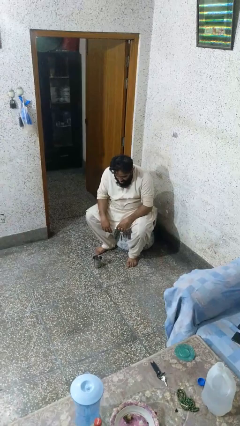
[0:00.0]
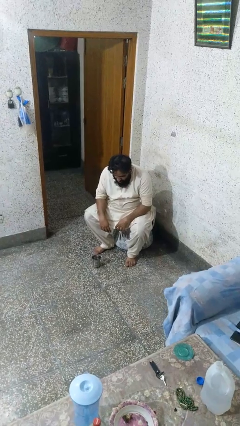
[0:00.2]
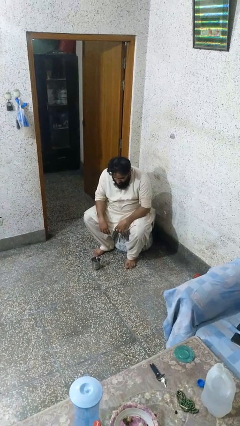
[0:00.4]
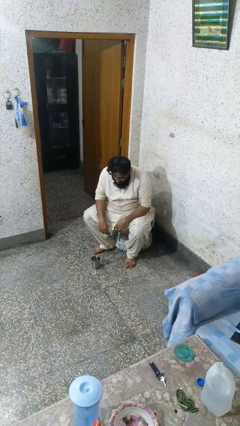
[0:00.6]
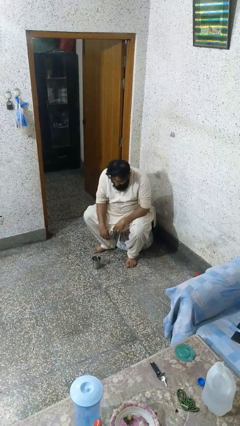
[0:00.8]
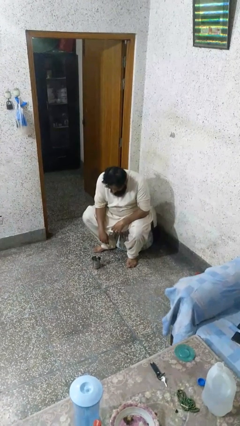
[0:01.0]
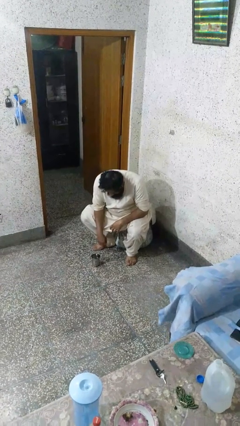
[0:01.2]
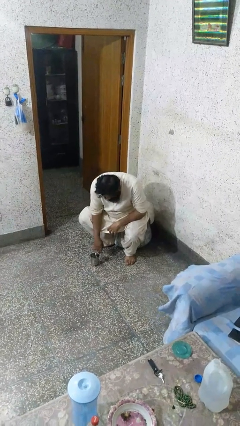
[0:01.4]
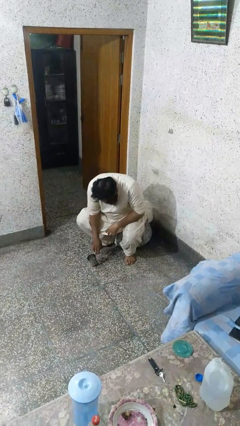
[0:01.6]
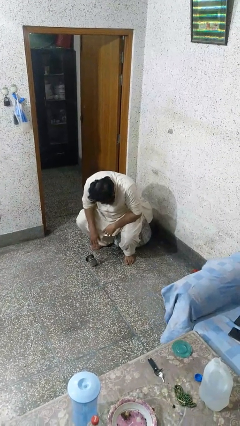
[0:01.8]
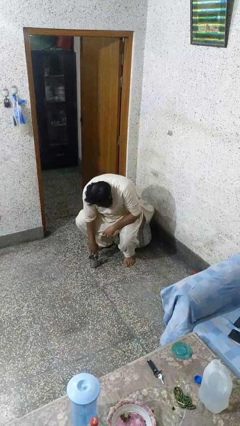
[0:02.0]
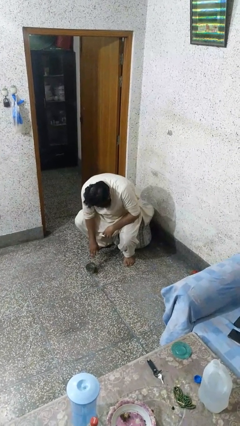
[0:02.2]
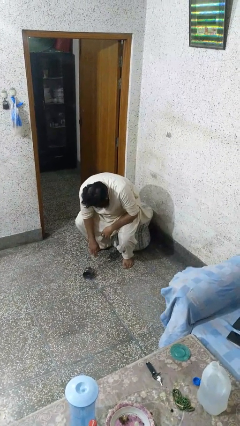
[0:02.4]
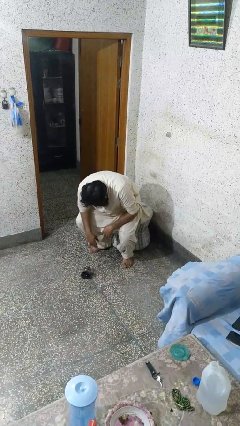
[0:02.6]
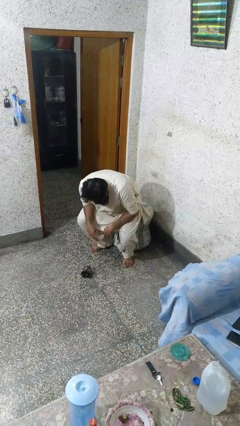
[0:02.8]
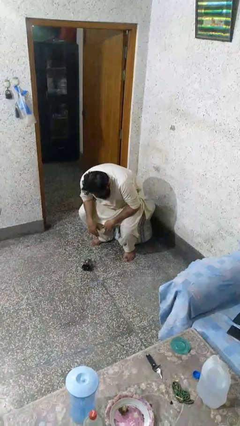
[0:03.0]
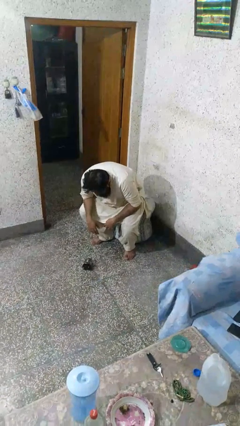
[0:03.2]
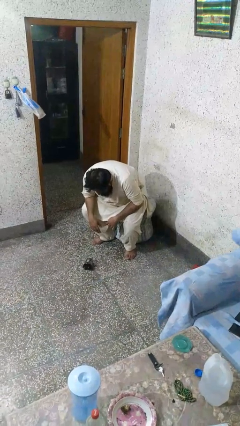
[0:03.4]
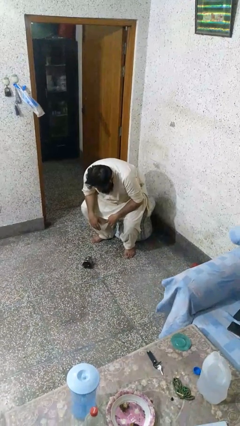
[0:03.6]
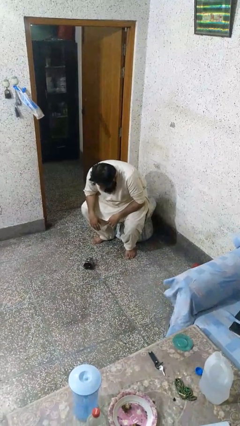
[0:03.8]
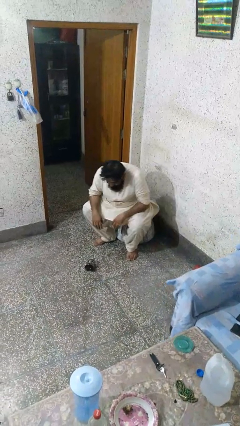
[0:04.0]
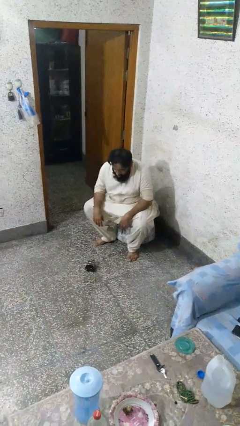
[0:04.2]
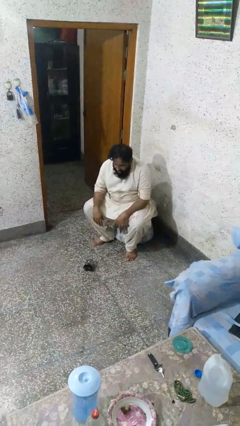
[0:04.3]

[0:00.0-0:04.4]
person spills on floor

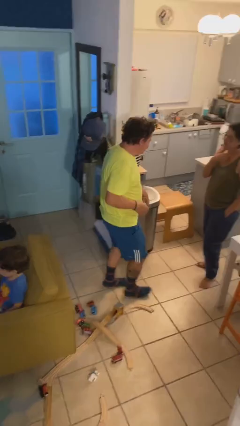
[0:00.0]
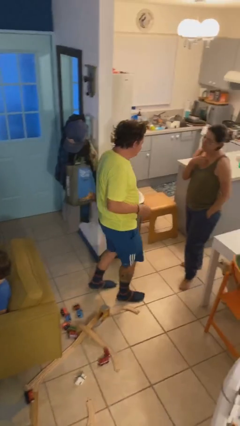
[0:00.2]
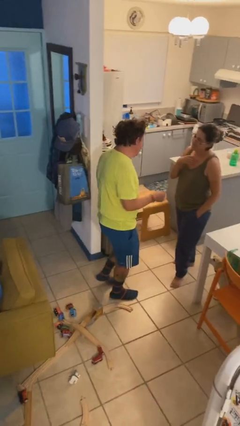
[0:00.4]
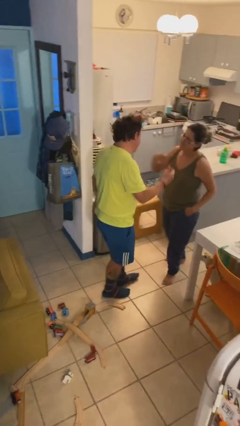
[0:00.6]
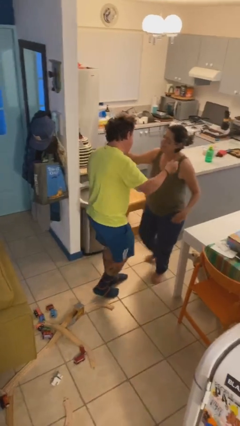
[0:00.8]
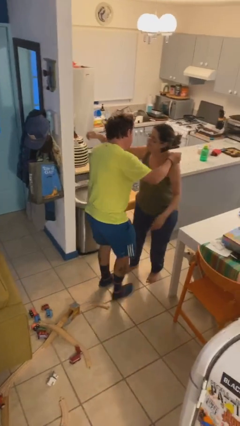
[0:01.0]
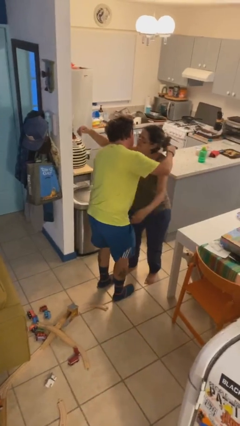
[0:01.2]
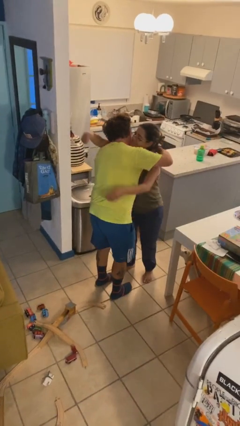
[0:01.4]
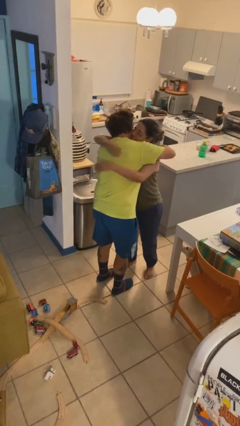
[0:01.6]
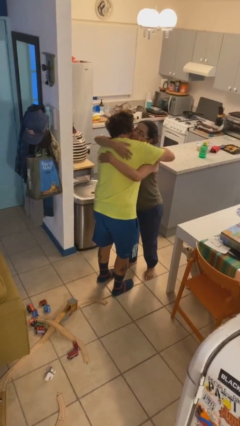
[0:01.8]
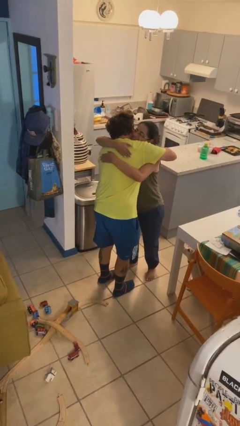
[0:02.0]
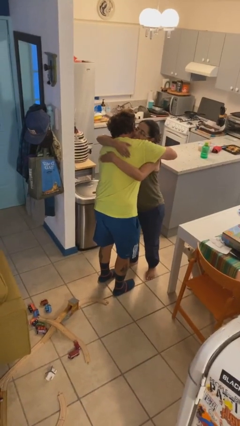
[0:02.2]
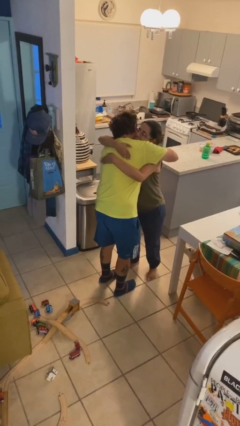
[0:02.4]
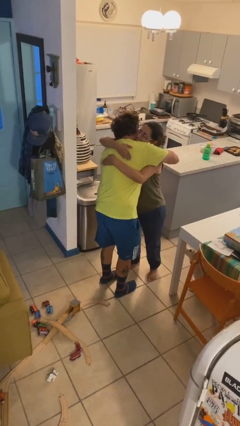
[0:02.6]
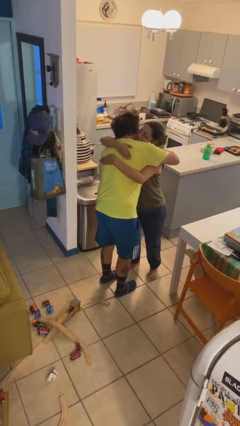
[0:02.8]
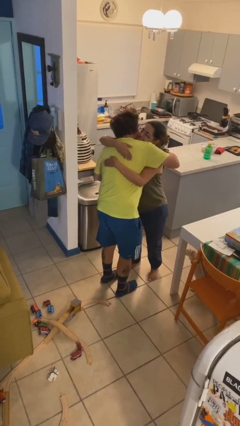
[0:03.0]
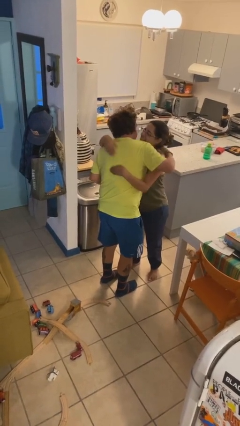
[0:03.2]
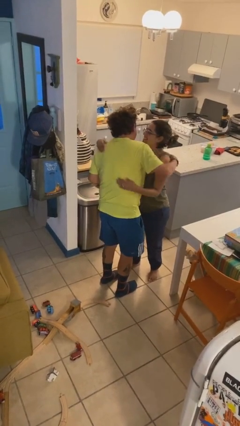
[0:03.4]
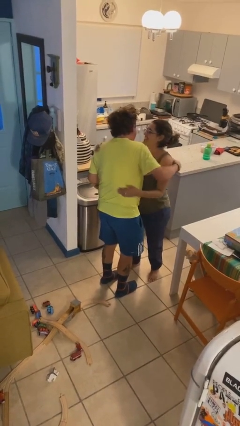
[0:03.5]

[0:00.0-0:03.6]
person embraces person

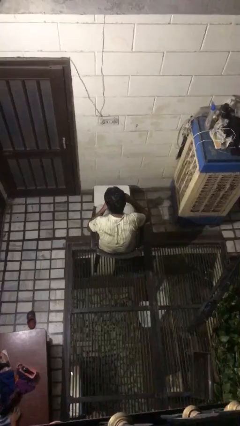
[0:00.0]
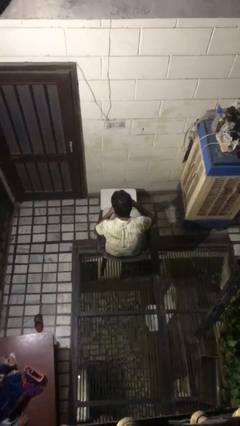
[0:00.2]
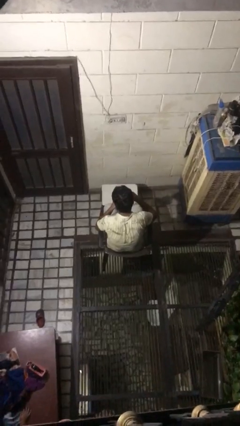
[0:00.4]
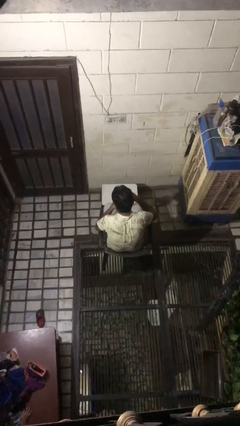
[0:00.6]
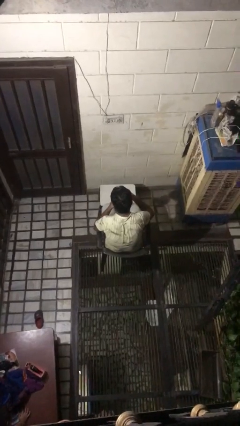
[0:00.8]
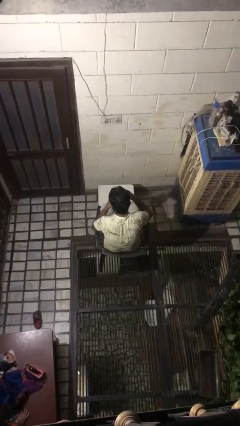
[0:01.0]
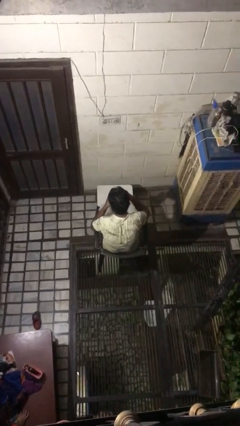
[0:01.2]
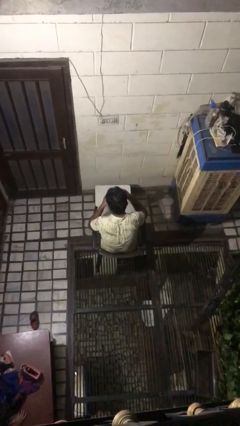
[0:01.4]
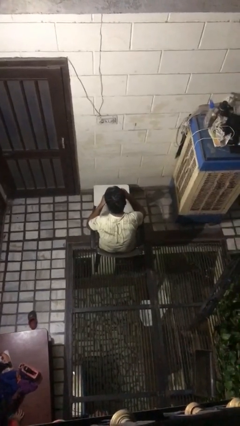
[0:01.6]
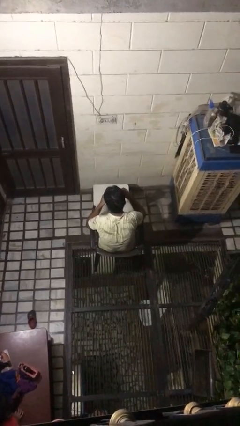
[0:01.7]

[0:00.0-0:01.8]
person stirs mug

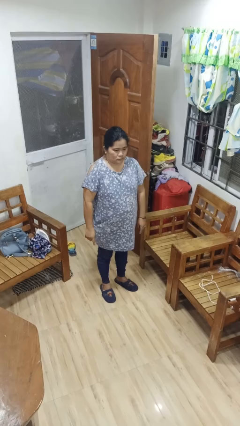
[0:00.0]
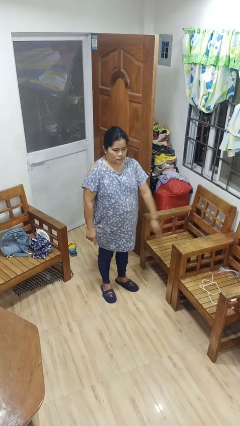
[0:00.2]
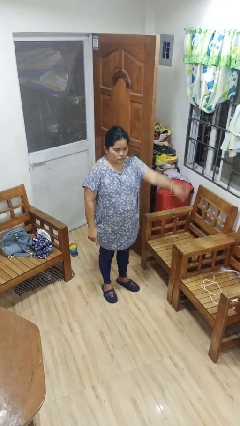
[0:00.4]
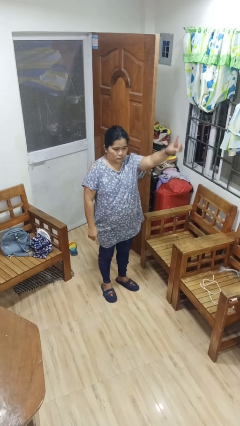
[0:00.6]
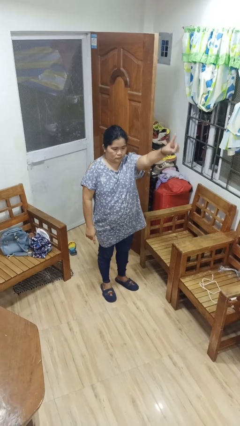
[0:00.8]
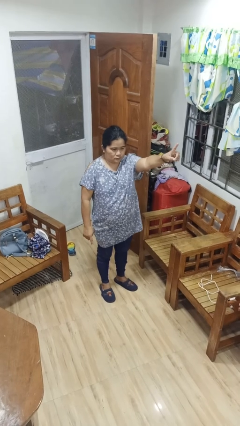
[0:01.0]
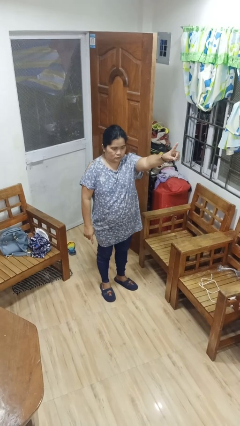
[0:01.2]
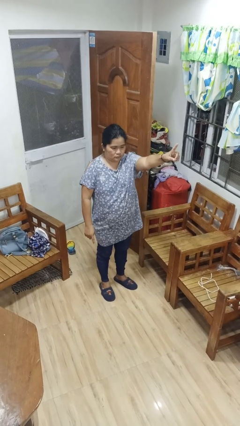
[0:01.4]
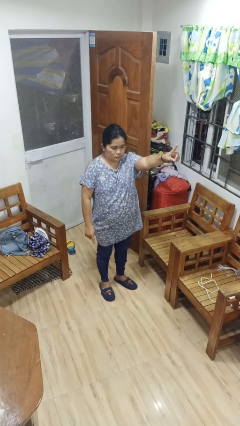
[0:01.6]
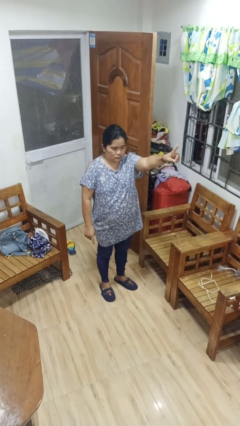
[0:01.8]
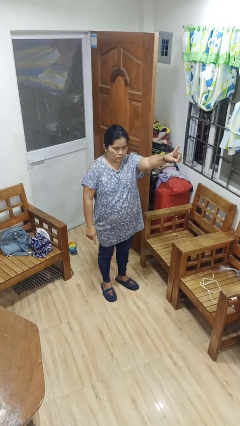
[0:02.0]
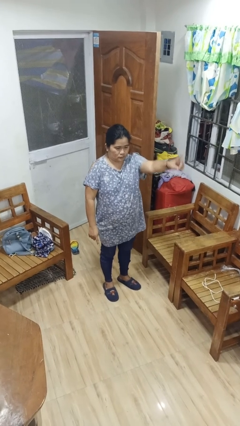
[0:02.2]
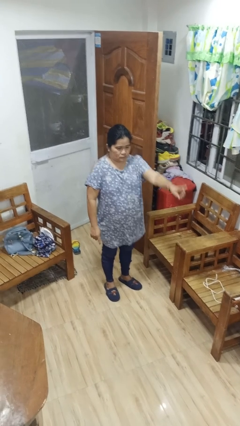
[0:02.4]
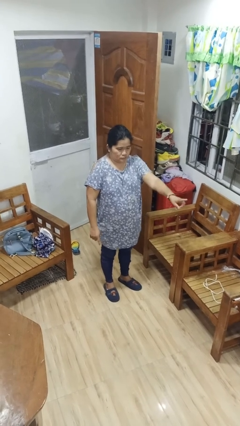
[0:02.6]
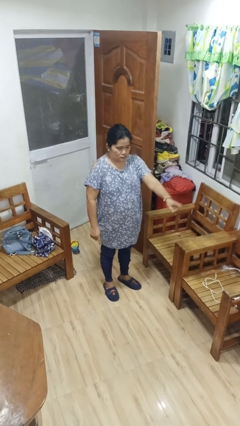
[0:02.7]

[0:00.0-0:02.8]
person gestures number one

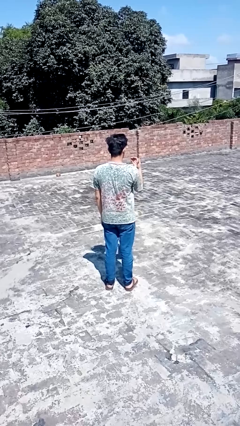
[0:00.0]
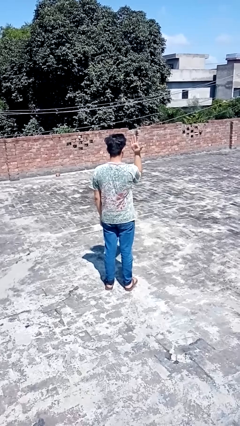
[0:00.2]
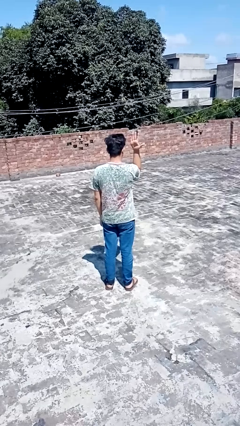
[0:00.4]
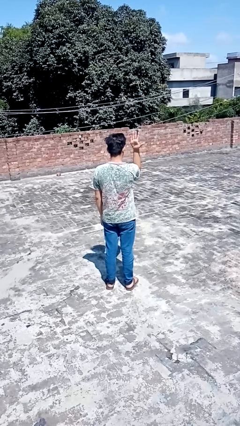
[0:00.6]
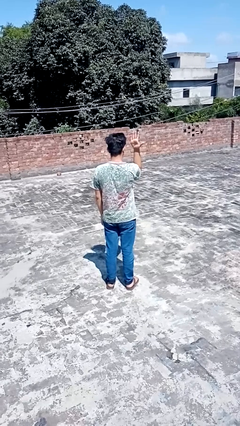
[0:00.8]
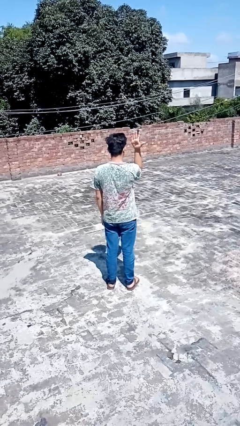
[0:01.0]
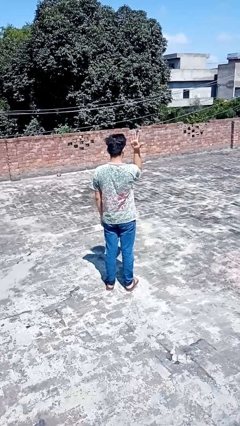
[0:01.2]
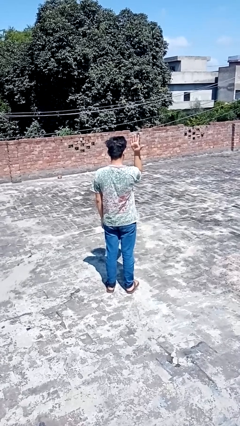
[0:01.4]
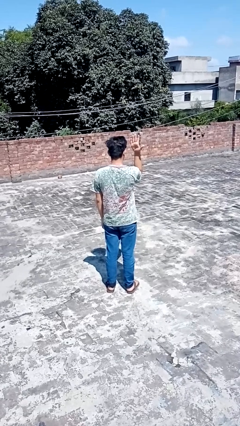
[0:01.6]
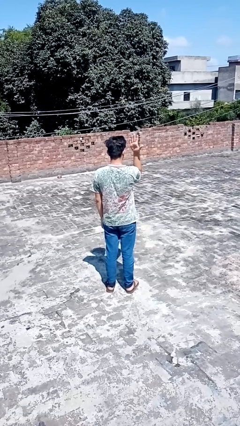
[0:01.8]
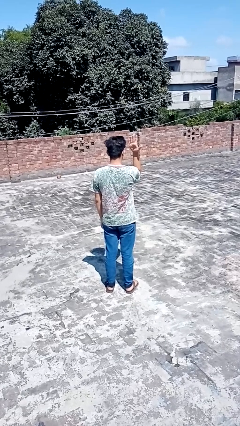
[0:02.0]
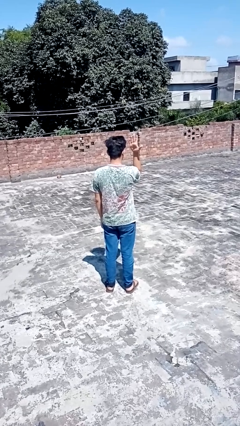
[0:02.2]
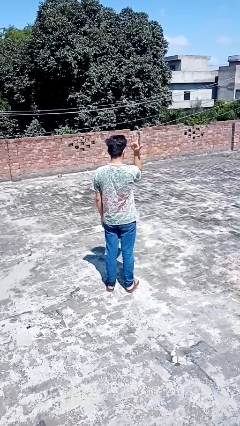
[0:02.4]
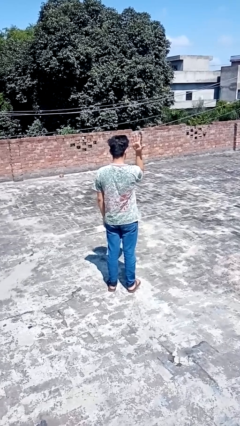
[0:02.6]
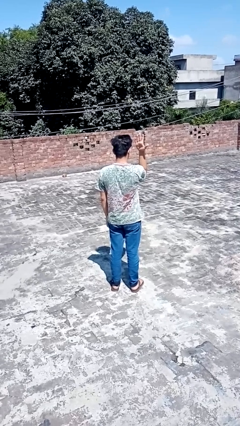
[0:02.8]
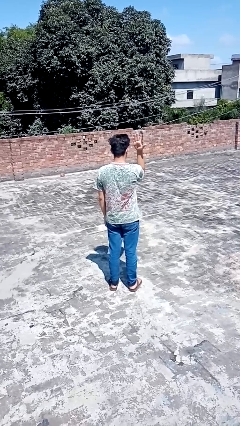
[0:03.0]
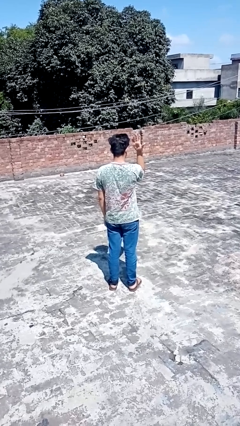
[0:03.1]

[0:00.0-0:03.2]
person gestures number five

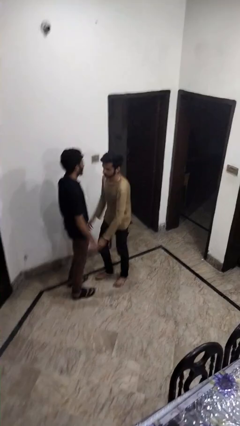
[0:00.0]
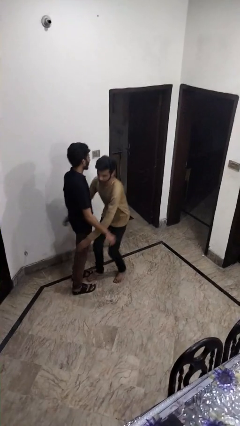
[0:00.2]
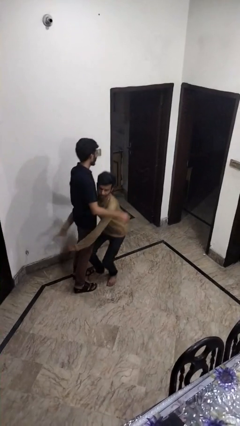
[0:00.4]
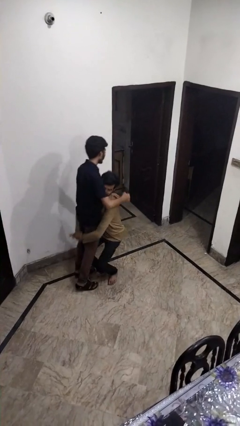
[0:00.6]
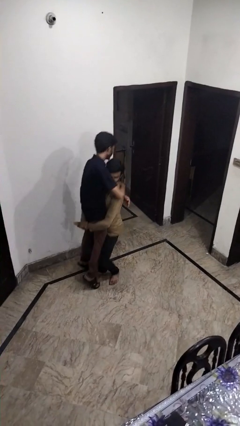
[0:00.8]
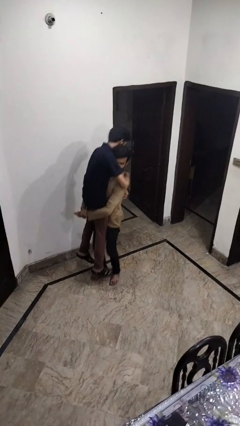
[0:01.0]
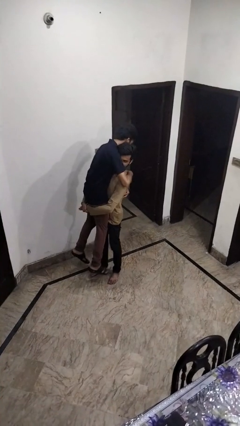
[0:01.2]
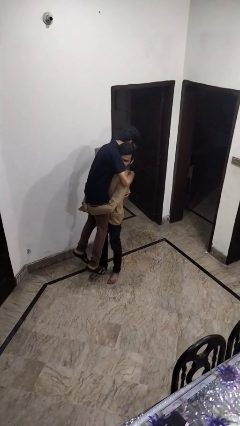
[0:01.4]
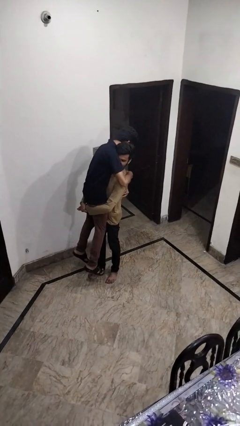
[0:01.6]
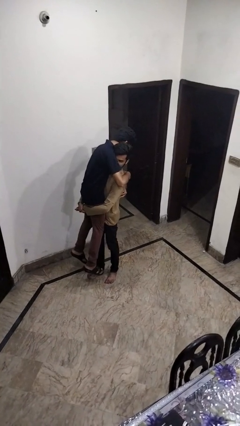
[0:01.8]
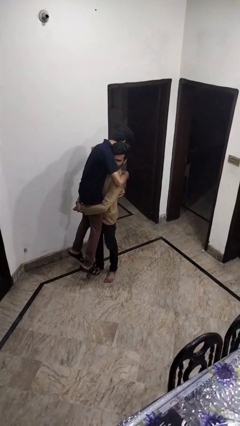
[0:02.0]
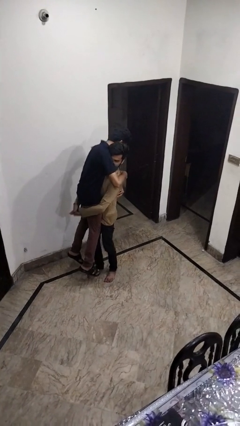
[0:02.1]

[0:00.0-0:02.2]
person picks up person
